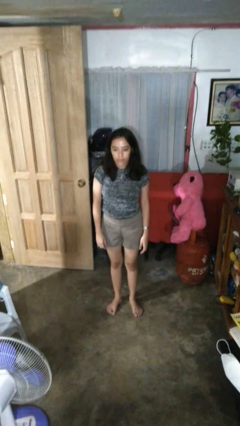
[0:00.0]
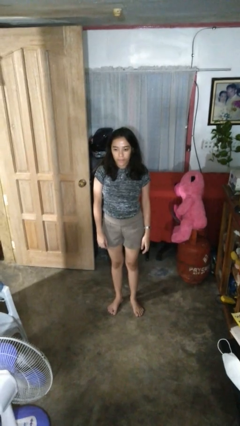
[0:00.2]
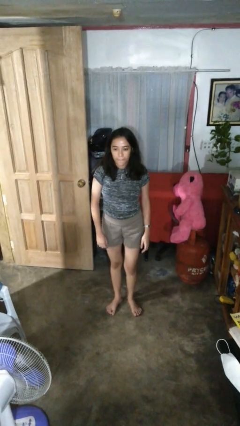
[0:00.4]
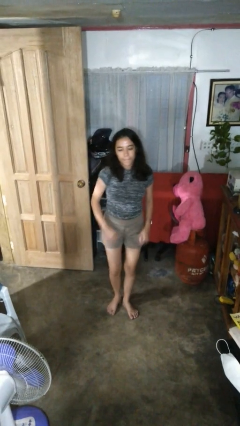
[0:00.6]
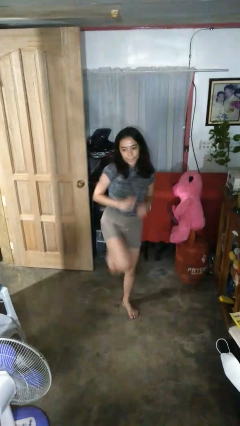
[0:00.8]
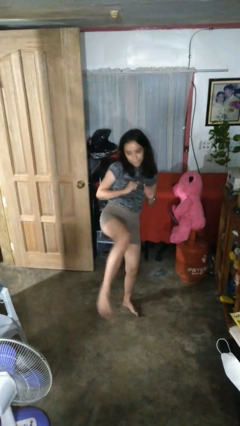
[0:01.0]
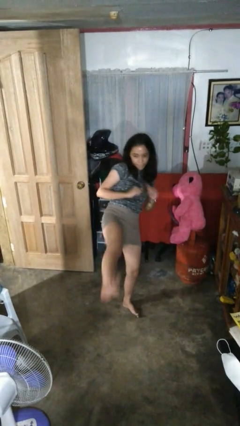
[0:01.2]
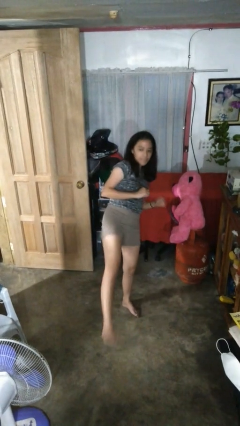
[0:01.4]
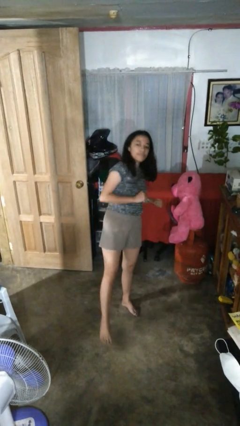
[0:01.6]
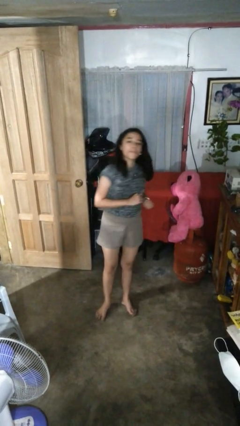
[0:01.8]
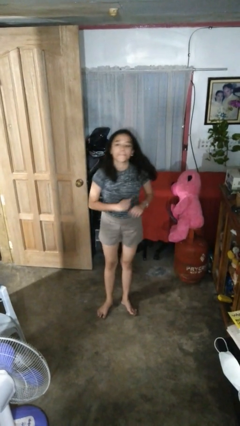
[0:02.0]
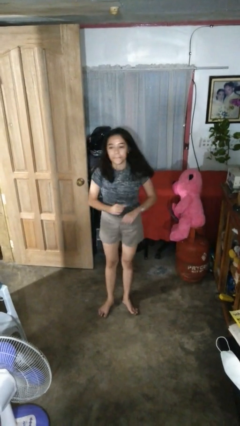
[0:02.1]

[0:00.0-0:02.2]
person karate kicks

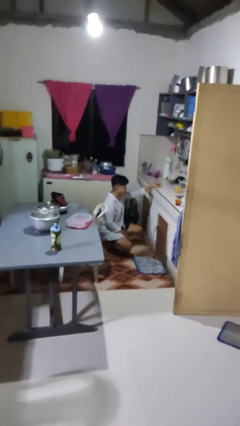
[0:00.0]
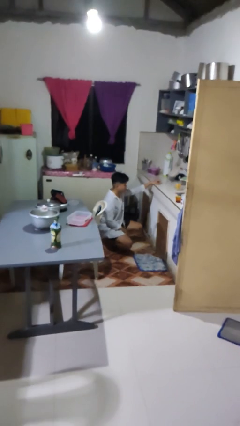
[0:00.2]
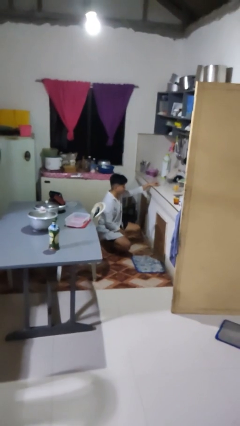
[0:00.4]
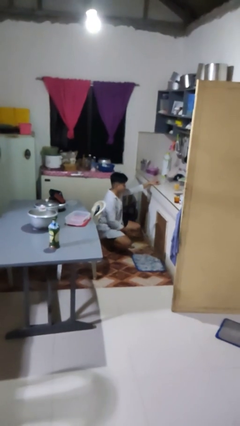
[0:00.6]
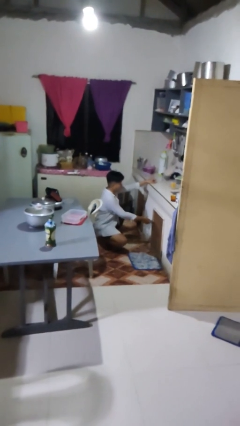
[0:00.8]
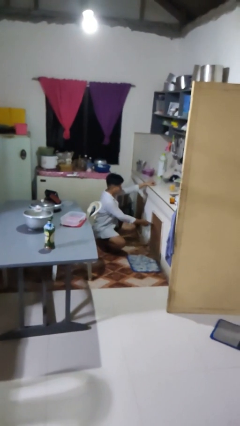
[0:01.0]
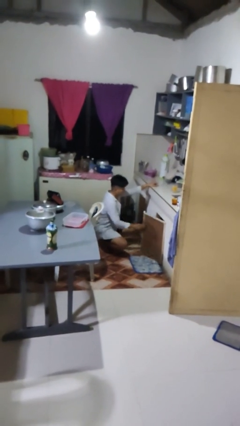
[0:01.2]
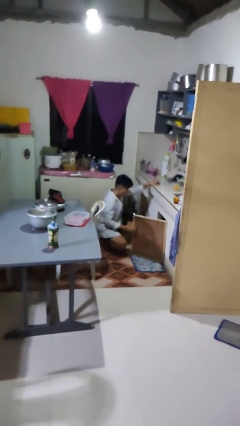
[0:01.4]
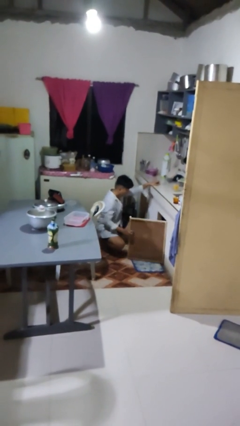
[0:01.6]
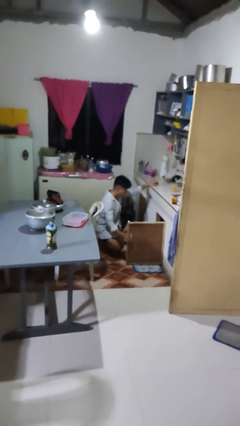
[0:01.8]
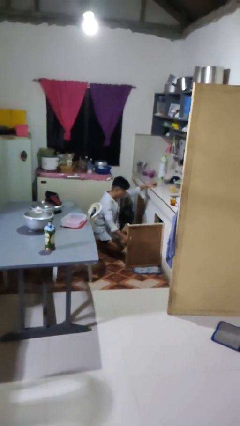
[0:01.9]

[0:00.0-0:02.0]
person opens cabinet

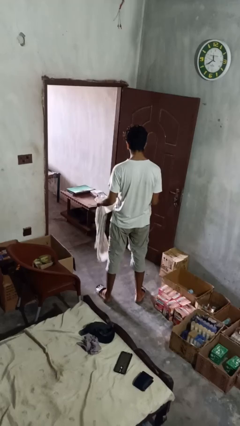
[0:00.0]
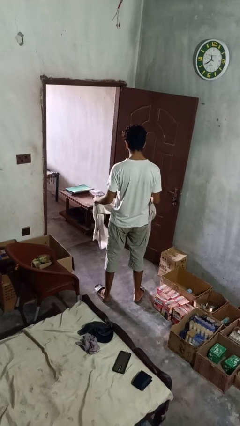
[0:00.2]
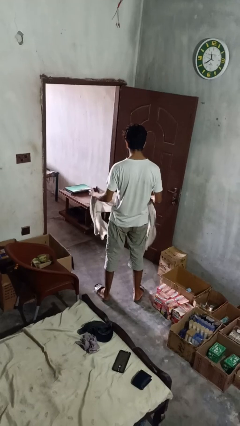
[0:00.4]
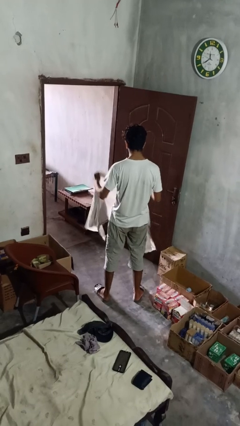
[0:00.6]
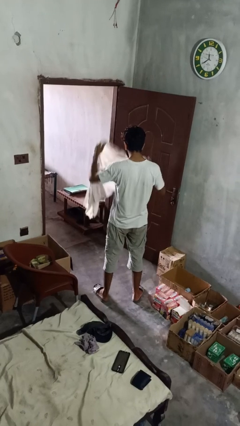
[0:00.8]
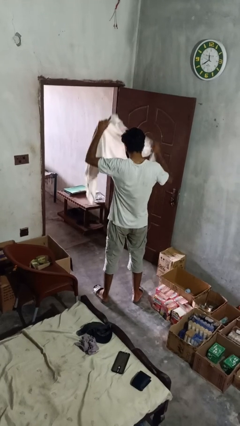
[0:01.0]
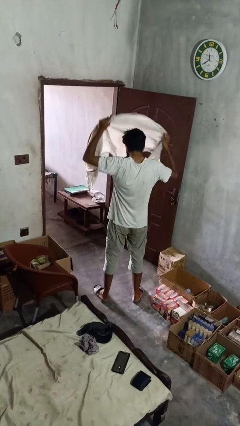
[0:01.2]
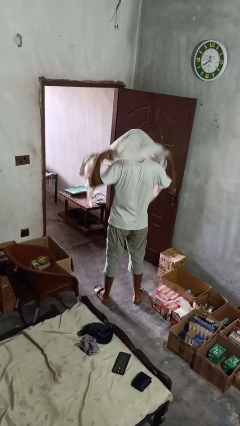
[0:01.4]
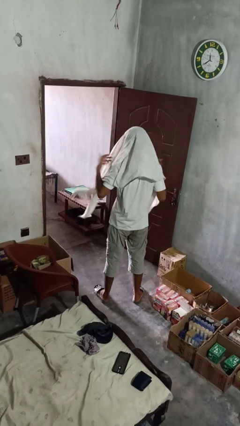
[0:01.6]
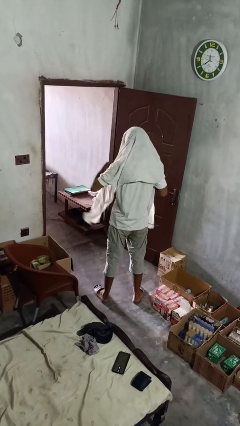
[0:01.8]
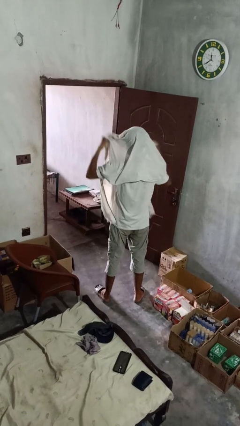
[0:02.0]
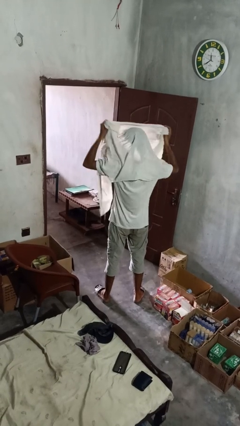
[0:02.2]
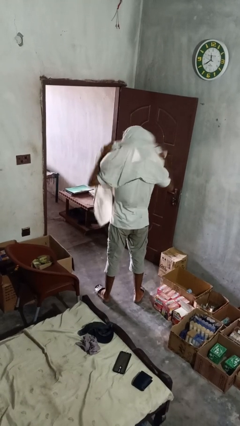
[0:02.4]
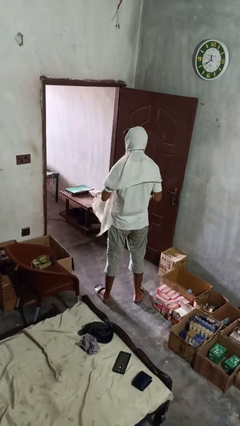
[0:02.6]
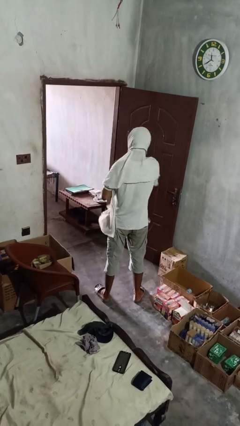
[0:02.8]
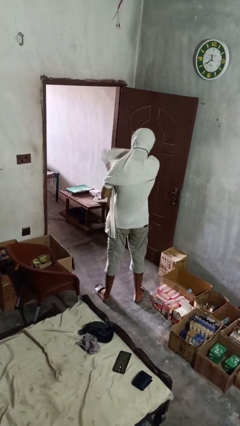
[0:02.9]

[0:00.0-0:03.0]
person puts on scarf

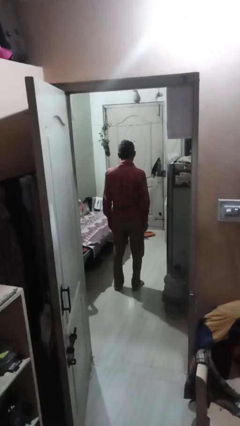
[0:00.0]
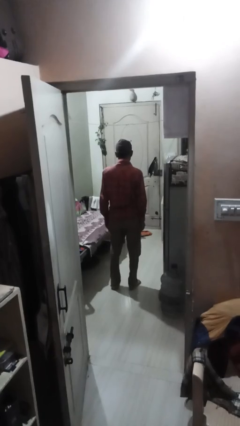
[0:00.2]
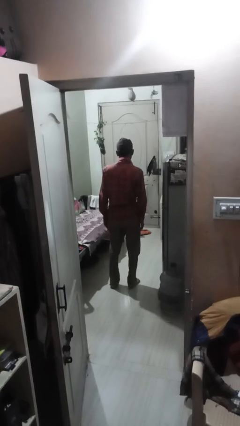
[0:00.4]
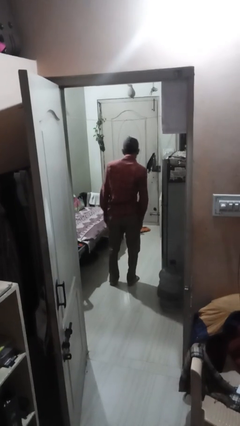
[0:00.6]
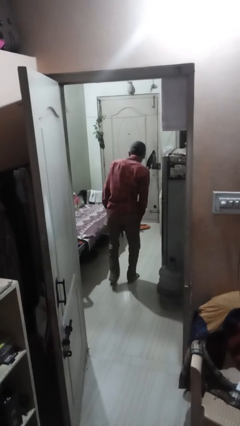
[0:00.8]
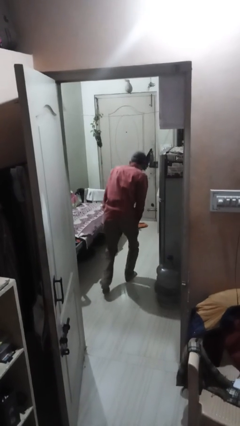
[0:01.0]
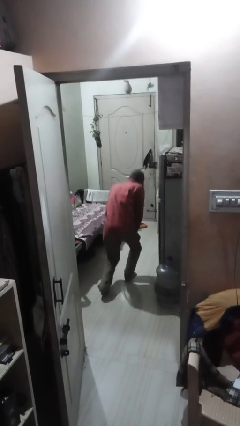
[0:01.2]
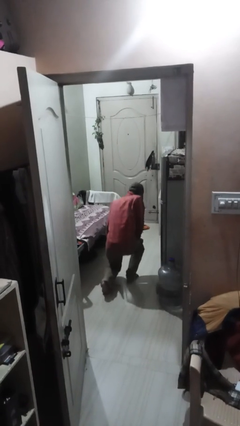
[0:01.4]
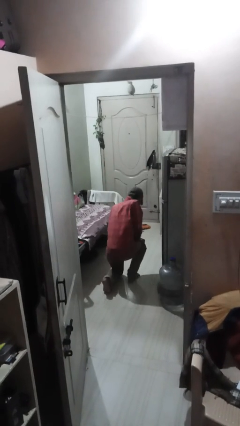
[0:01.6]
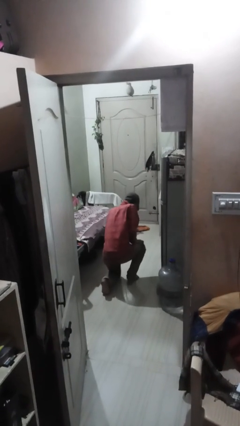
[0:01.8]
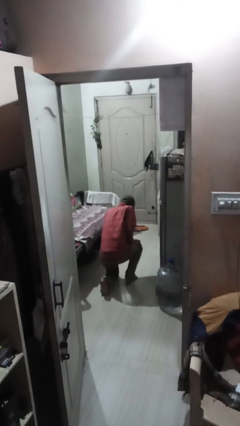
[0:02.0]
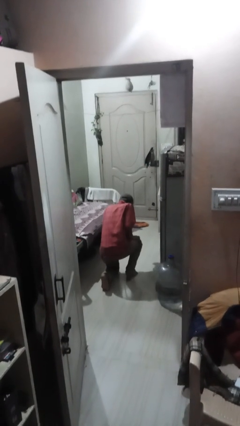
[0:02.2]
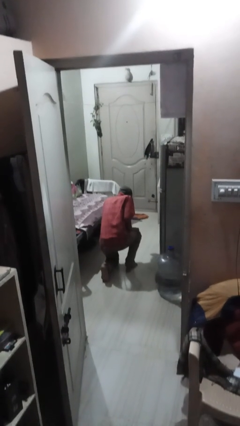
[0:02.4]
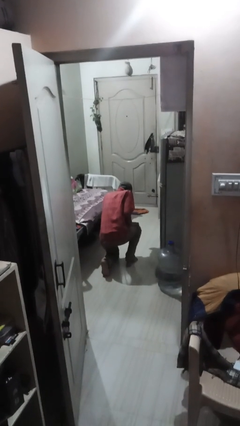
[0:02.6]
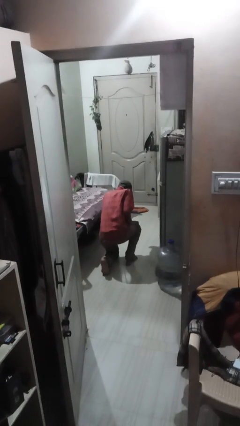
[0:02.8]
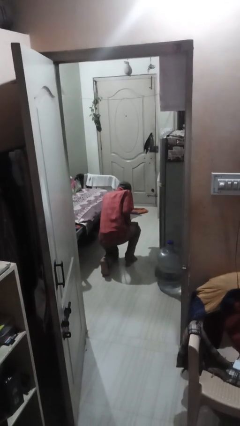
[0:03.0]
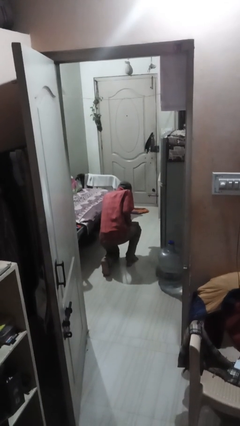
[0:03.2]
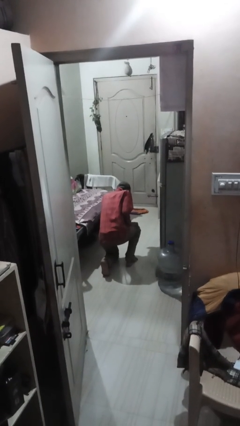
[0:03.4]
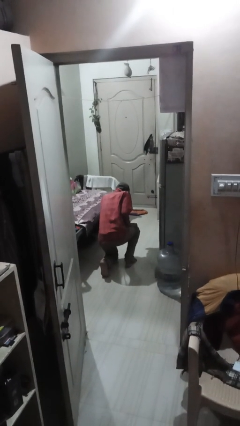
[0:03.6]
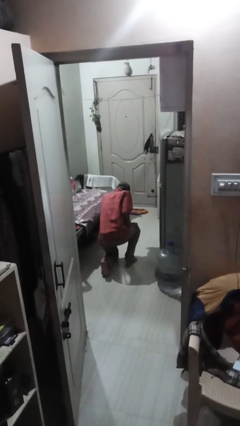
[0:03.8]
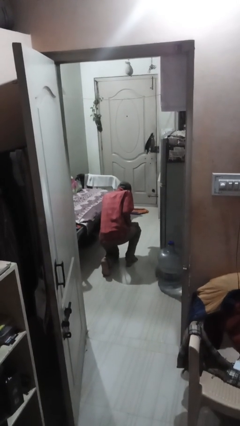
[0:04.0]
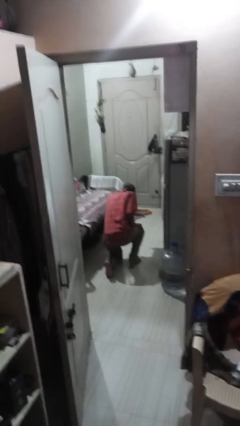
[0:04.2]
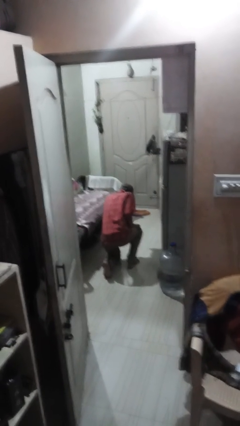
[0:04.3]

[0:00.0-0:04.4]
person kneels

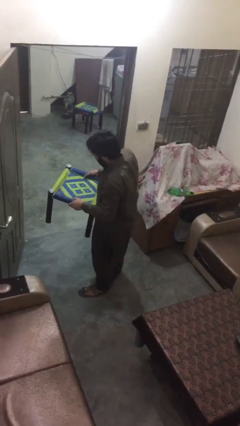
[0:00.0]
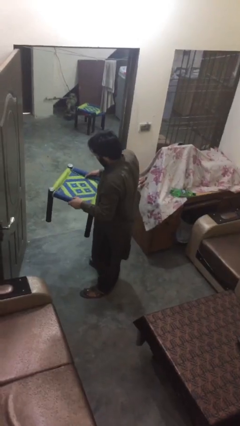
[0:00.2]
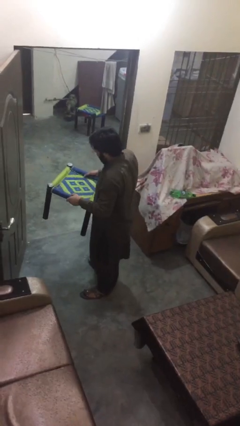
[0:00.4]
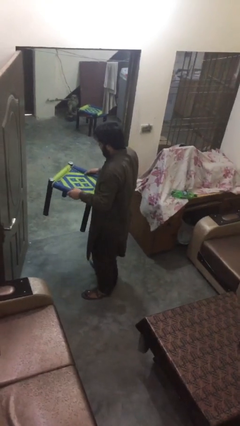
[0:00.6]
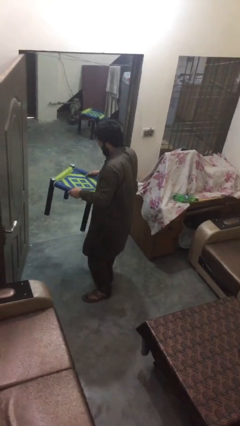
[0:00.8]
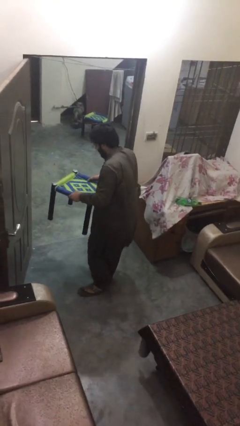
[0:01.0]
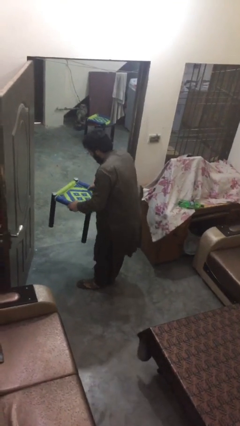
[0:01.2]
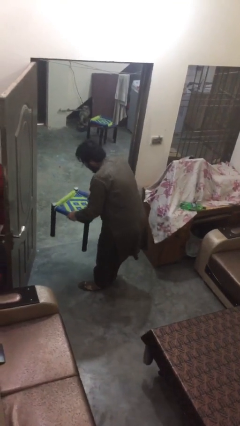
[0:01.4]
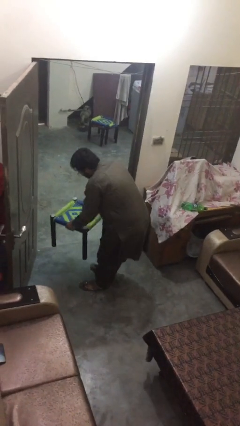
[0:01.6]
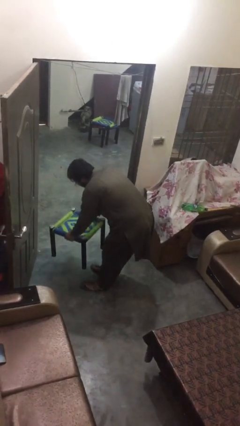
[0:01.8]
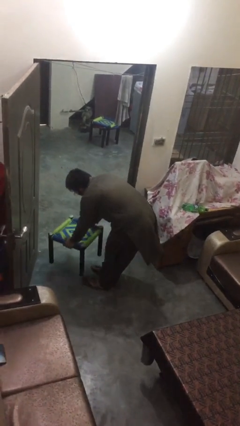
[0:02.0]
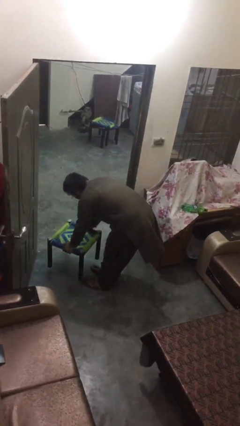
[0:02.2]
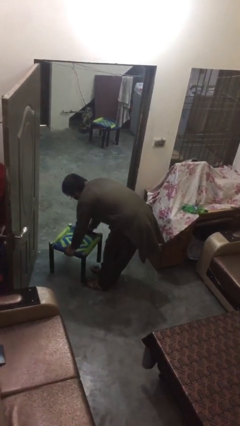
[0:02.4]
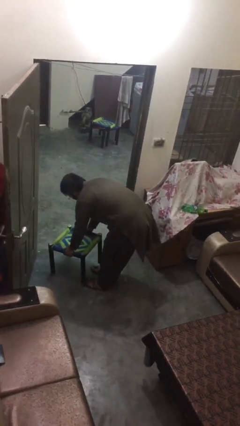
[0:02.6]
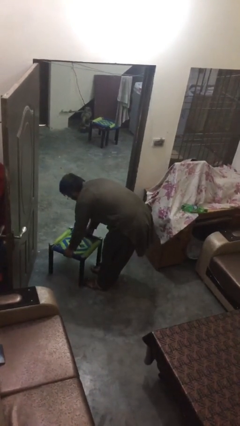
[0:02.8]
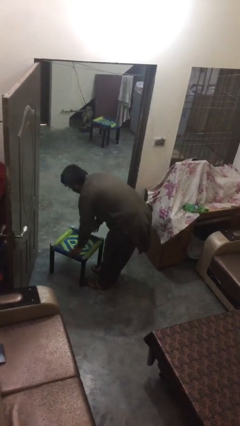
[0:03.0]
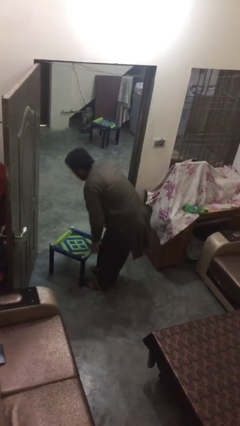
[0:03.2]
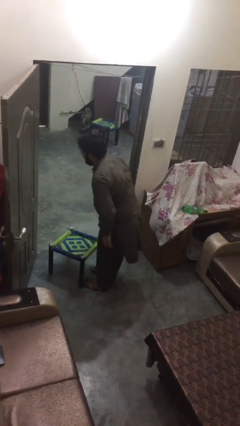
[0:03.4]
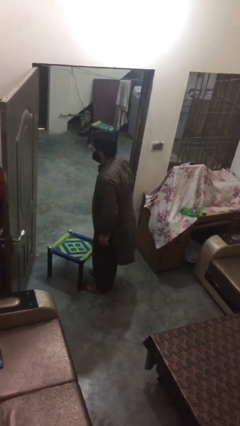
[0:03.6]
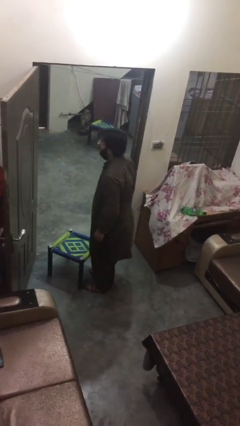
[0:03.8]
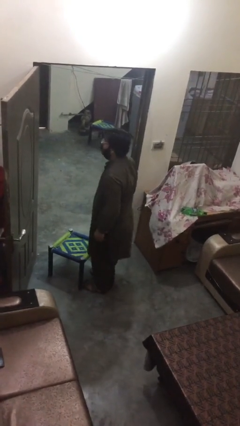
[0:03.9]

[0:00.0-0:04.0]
person puts down object on floor

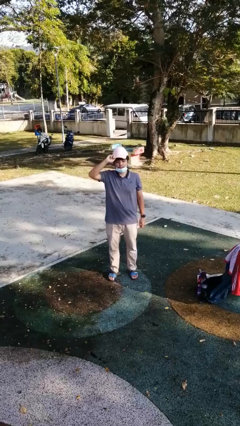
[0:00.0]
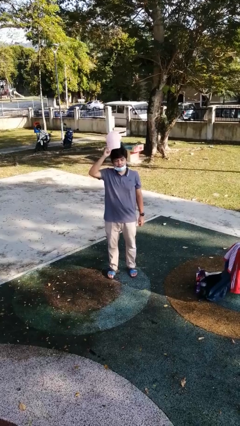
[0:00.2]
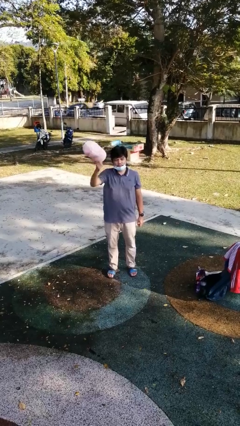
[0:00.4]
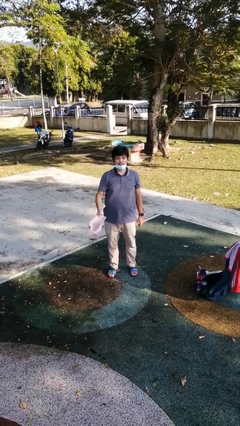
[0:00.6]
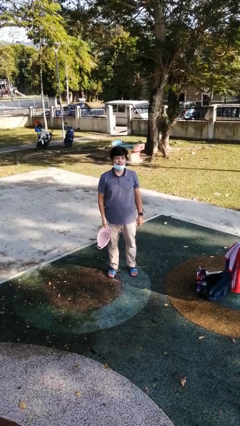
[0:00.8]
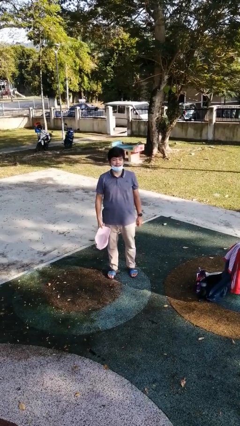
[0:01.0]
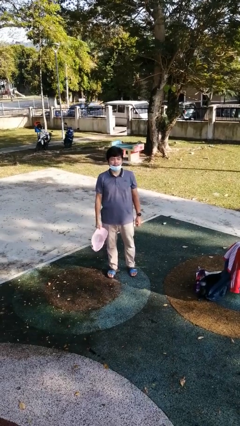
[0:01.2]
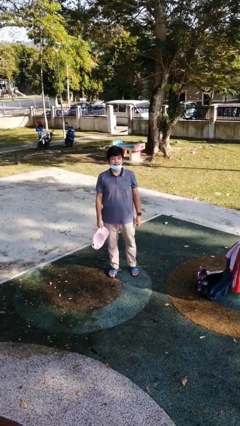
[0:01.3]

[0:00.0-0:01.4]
person takes off hat

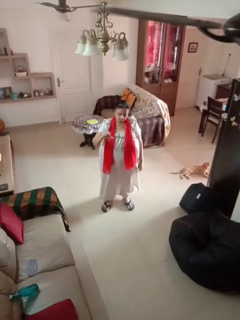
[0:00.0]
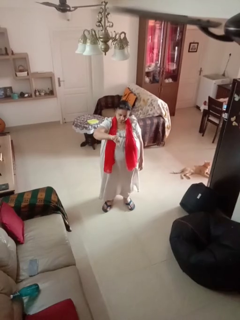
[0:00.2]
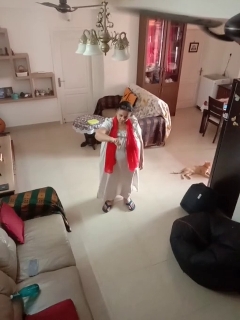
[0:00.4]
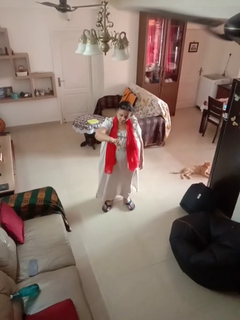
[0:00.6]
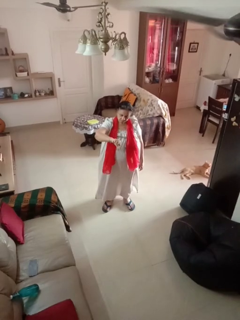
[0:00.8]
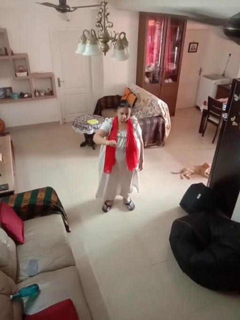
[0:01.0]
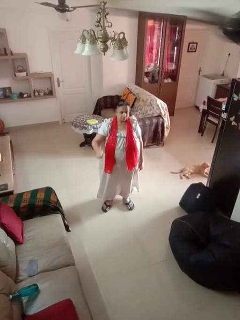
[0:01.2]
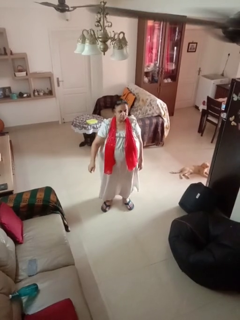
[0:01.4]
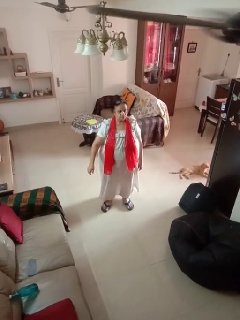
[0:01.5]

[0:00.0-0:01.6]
person gestures thumbs down
